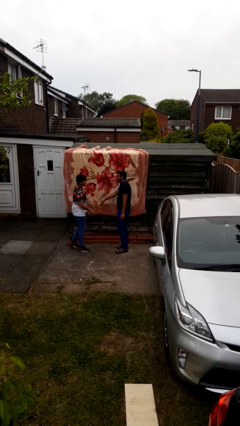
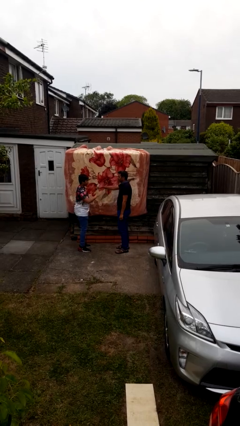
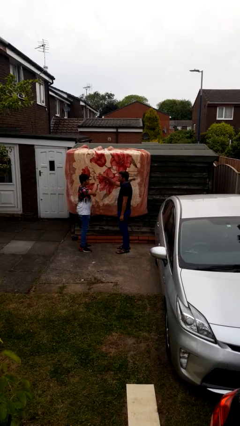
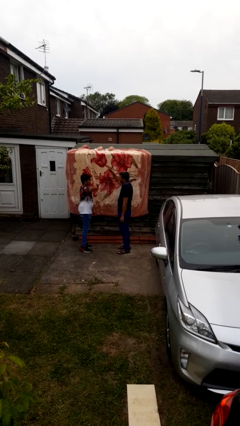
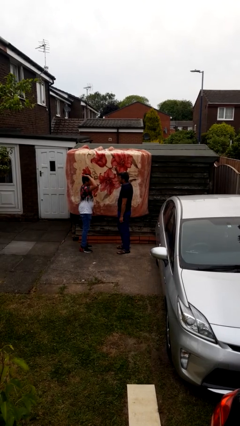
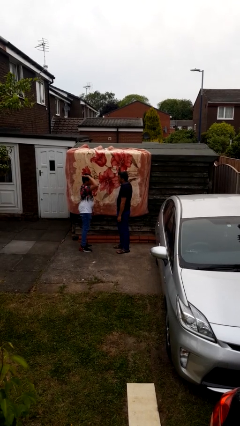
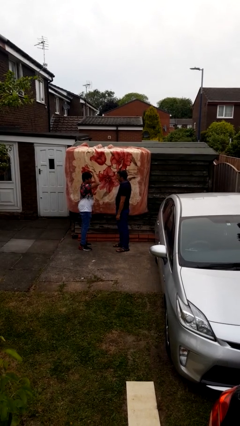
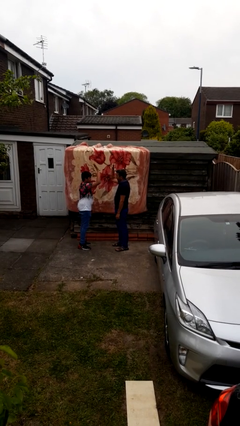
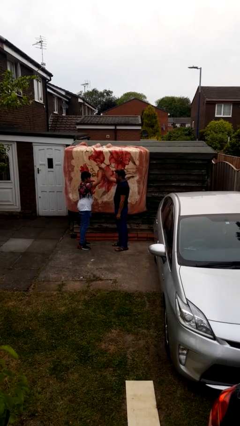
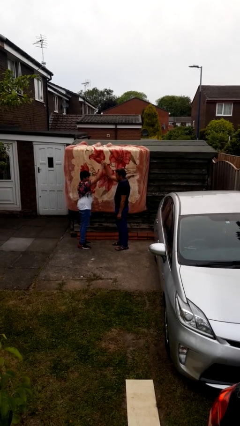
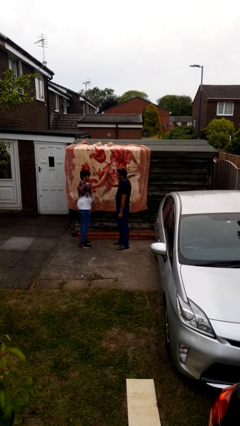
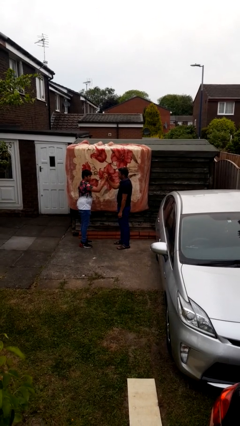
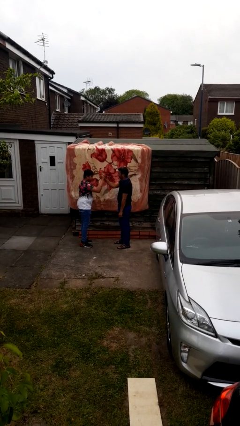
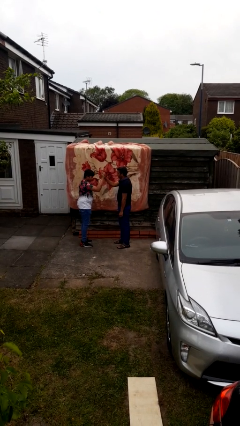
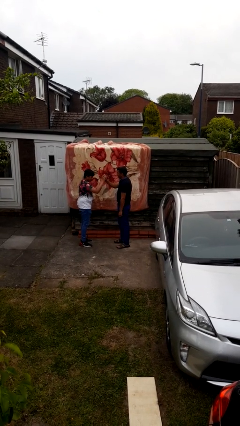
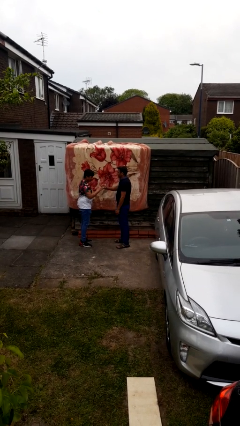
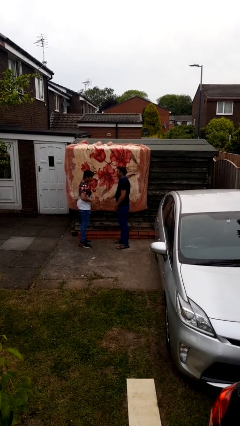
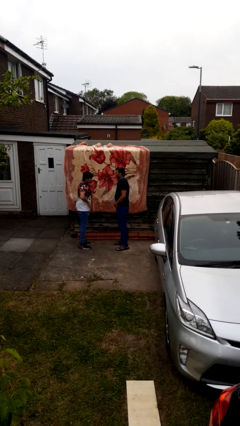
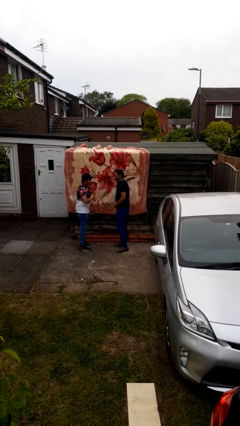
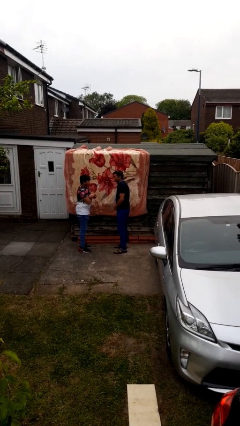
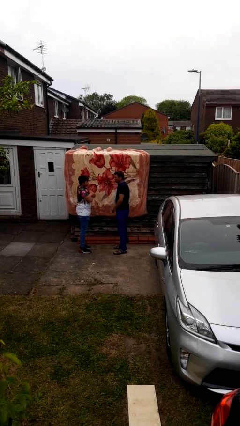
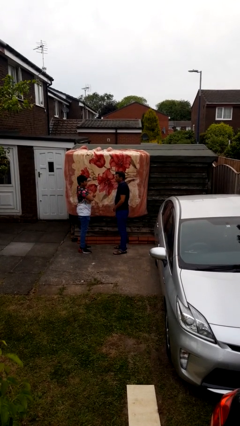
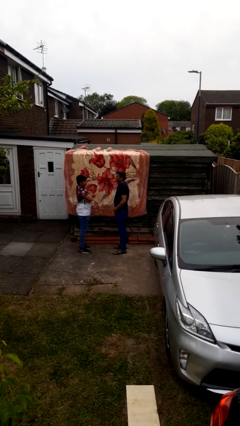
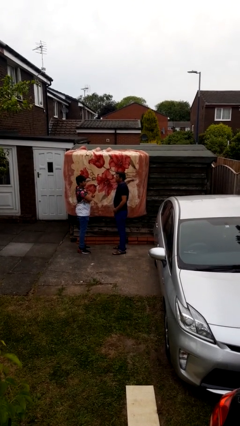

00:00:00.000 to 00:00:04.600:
person highfives hand

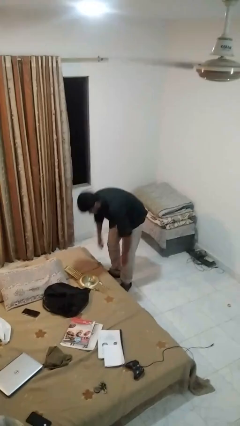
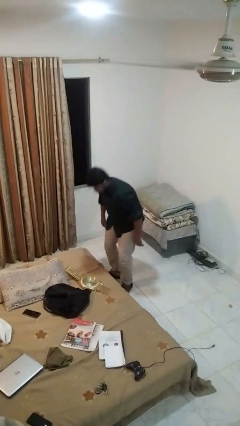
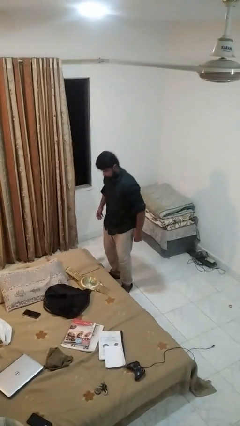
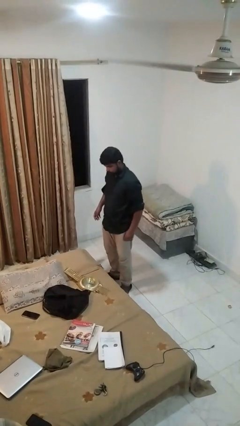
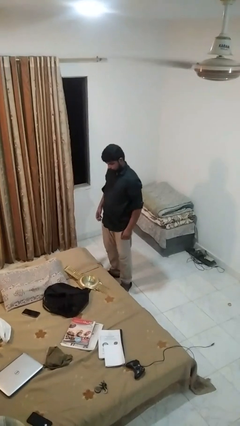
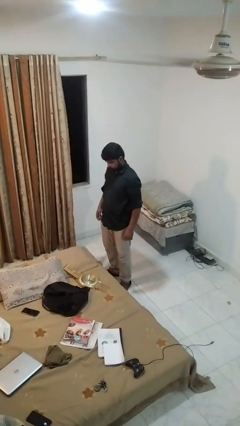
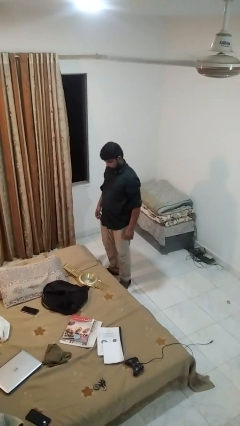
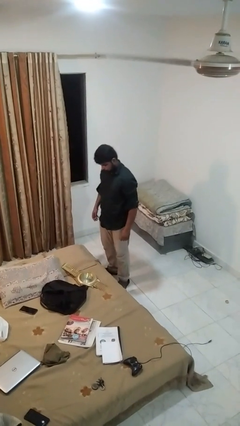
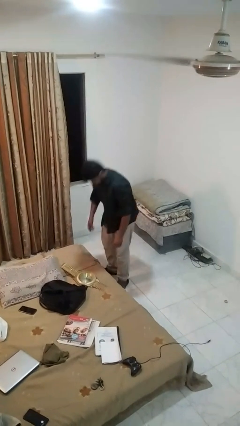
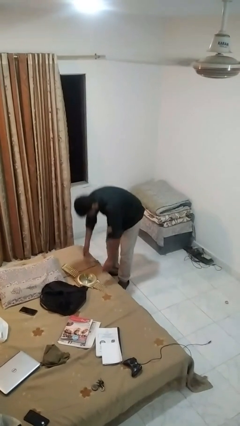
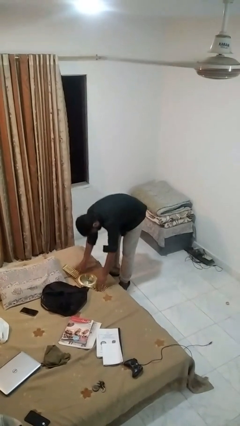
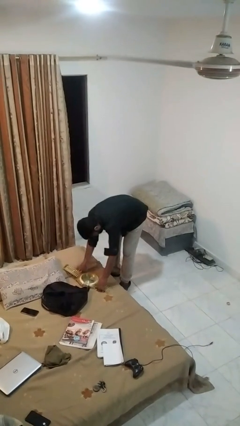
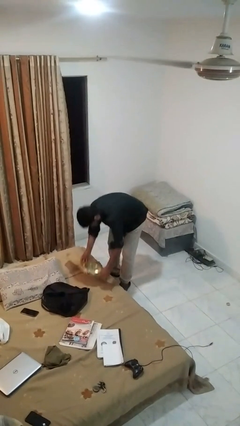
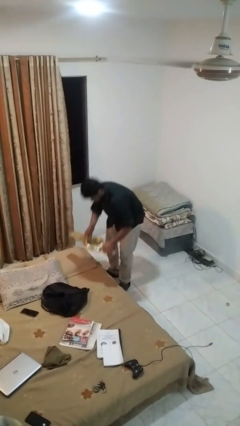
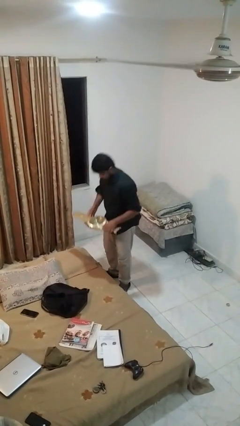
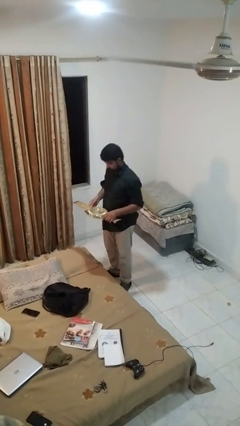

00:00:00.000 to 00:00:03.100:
person picks up object from bed

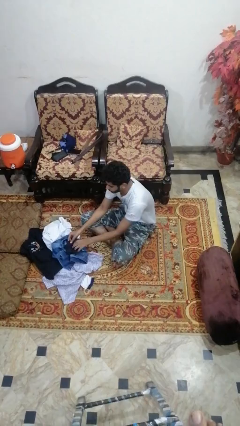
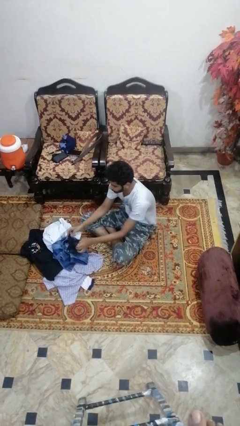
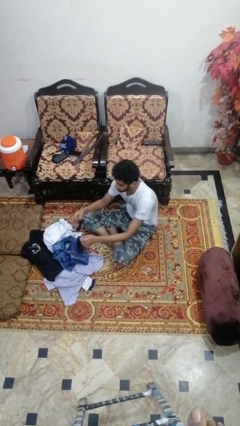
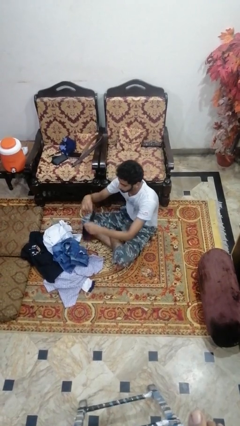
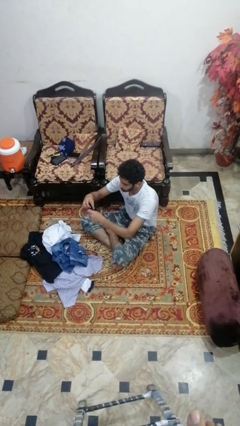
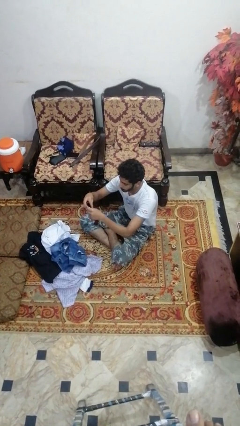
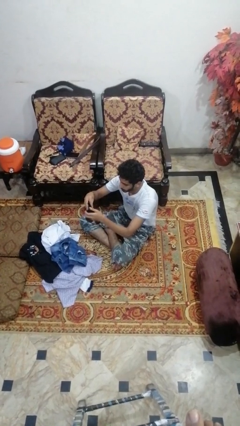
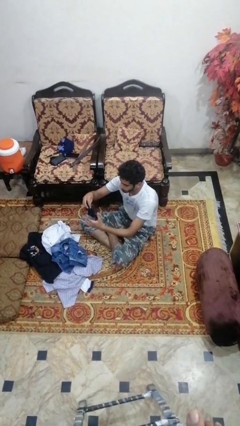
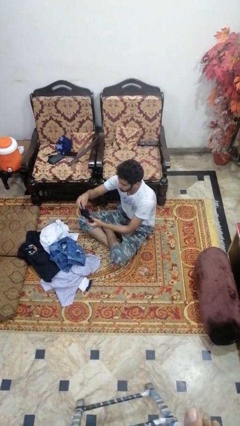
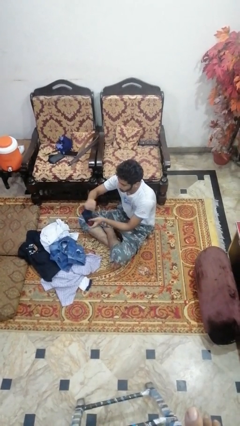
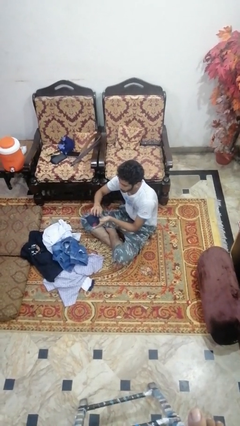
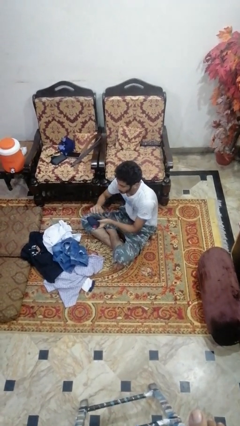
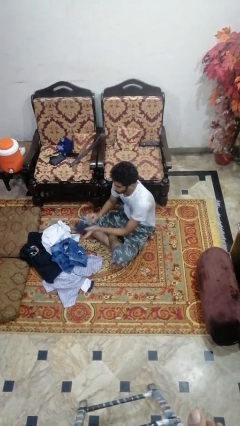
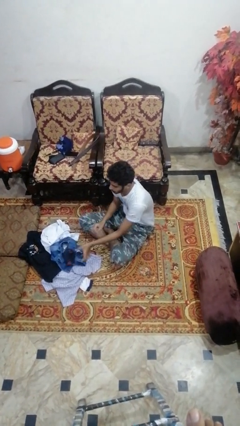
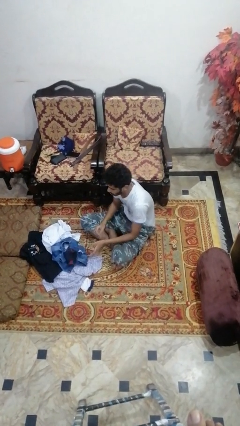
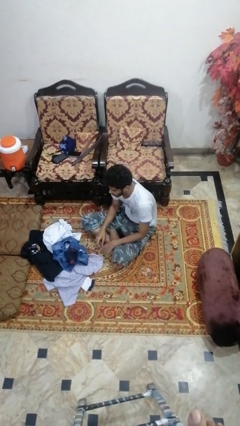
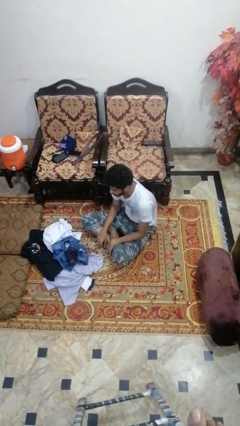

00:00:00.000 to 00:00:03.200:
person folds socks

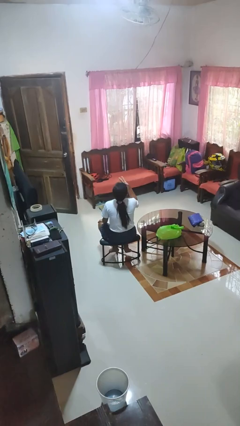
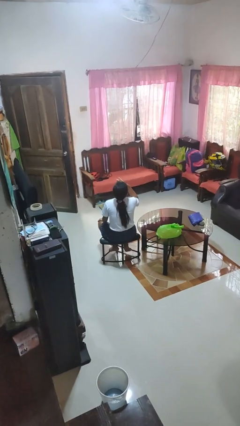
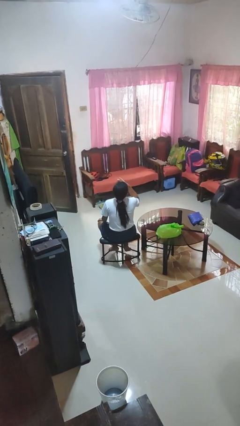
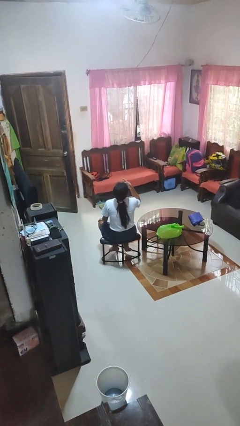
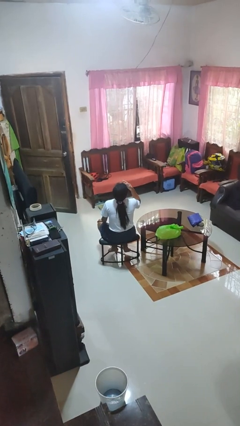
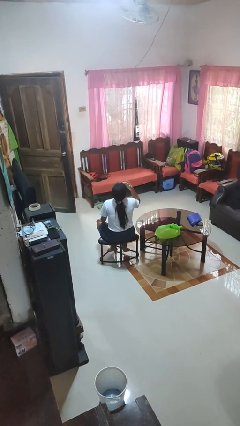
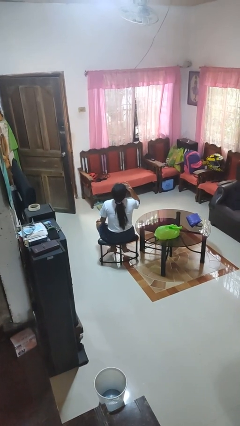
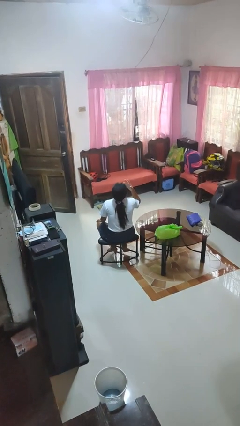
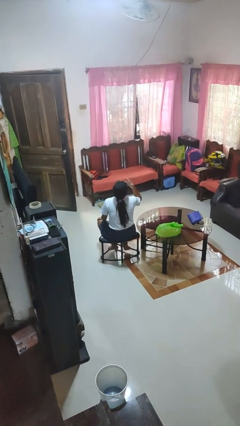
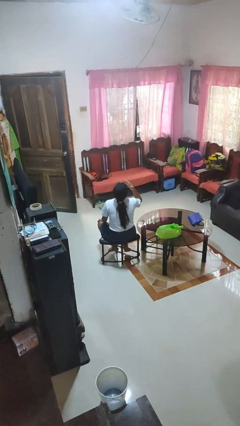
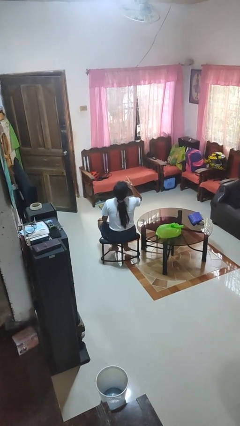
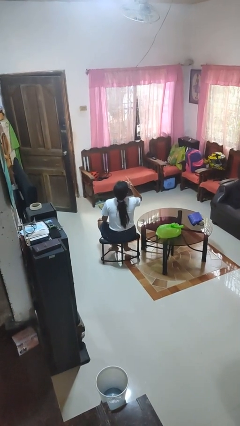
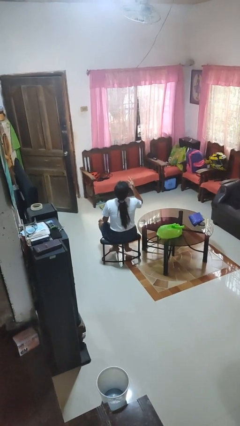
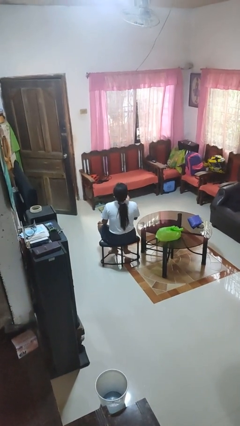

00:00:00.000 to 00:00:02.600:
person licks fingers

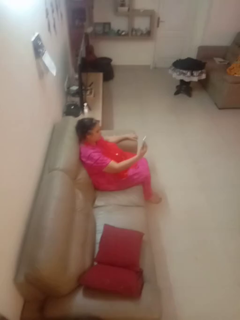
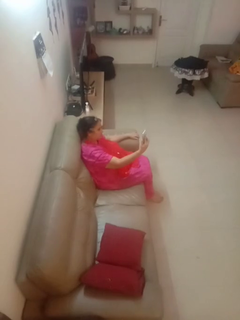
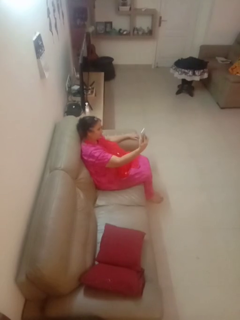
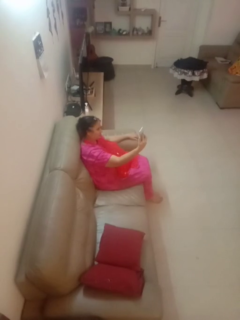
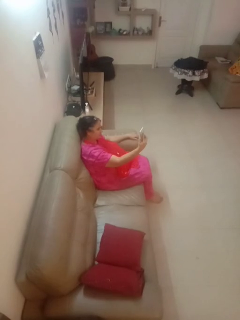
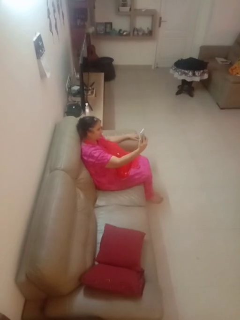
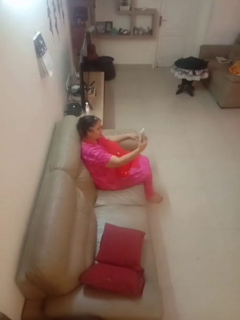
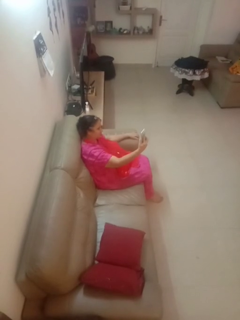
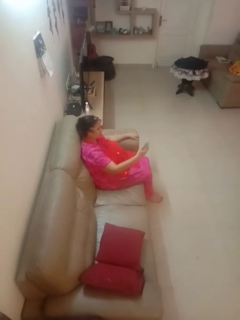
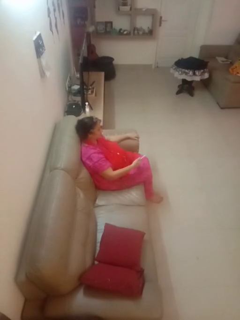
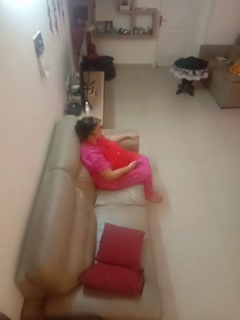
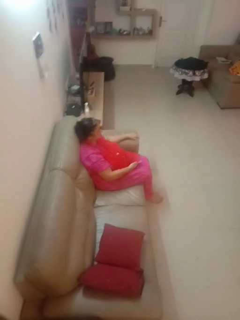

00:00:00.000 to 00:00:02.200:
person takes selfie

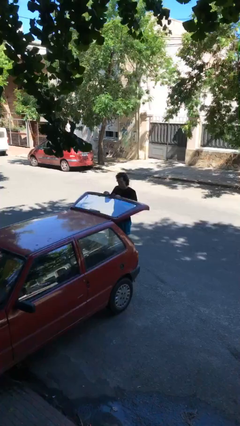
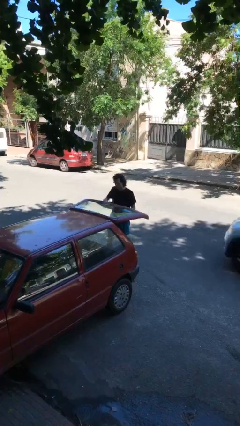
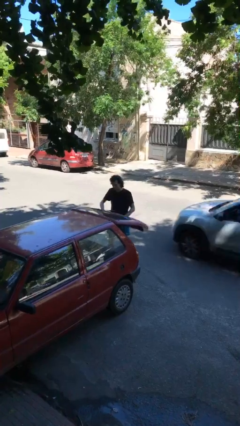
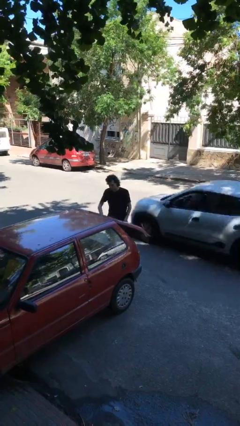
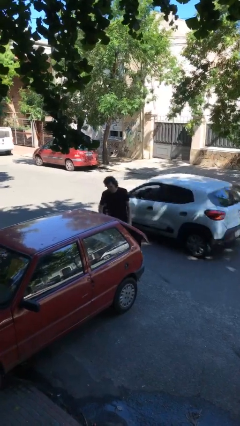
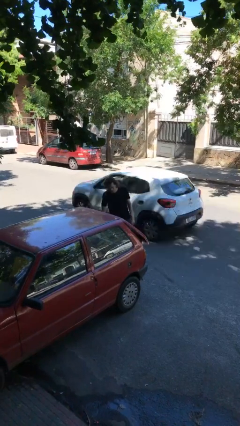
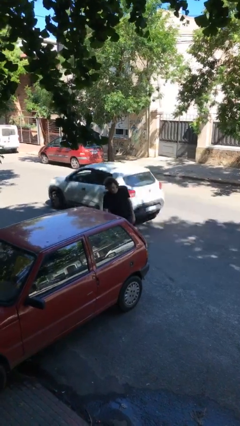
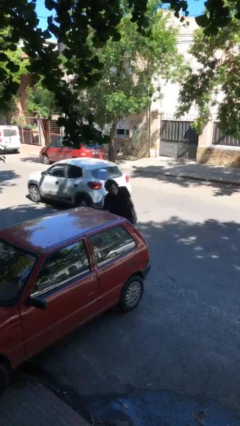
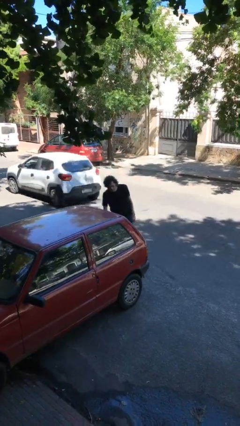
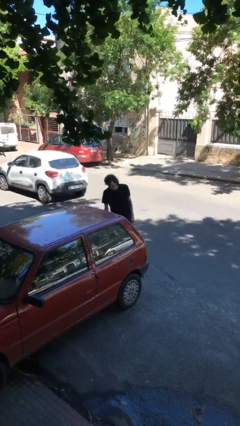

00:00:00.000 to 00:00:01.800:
person closes car trunk

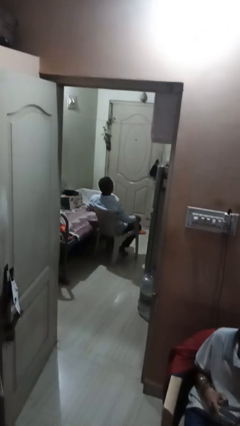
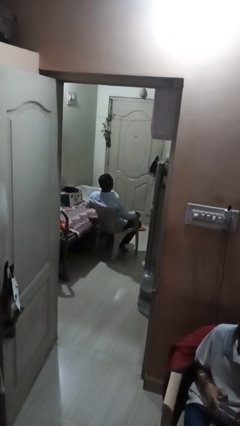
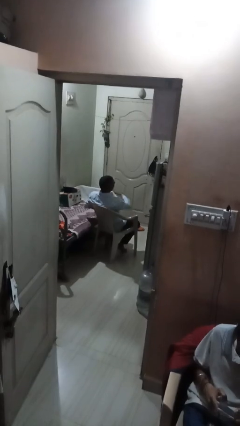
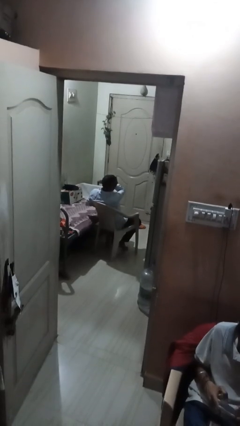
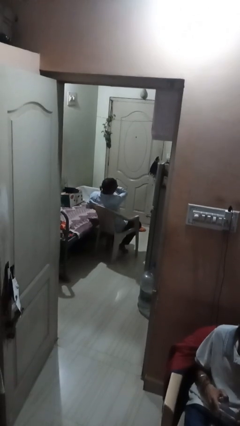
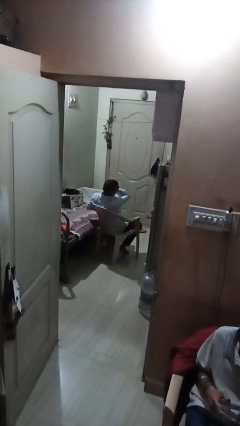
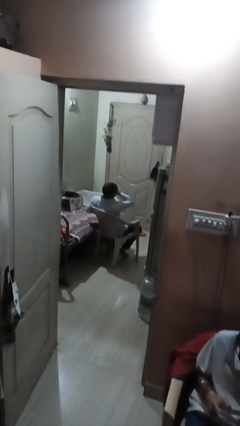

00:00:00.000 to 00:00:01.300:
person gestures cut
